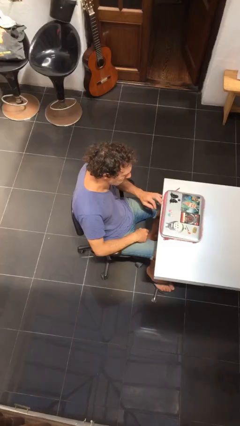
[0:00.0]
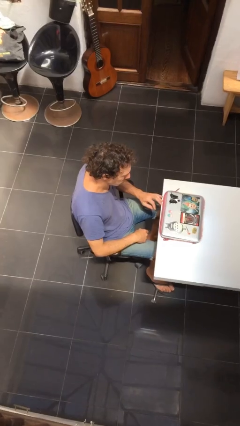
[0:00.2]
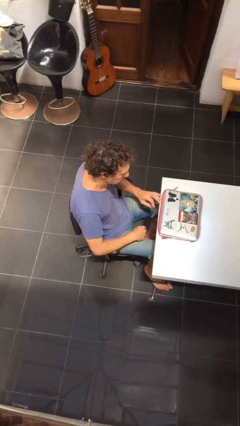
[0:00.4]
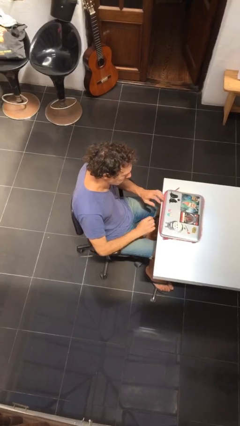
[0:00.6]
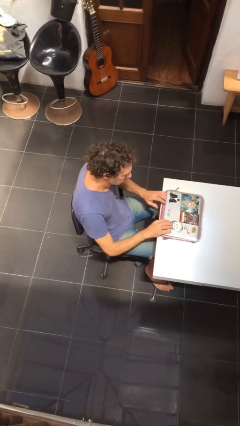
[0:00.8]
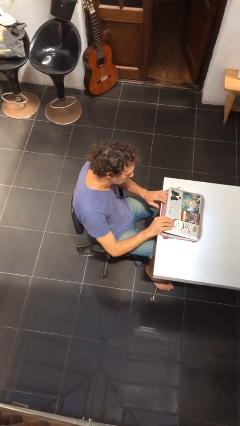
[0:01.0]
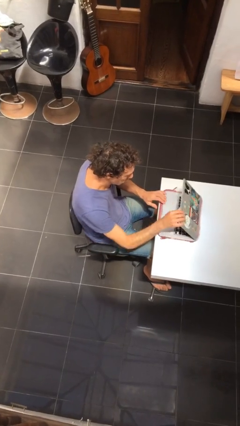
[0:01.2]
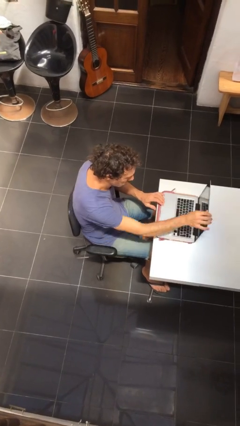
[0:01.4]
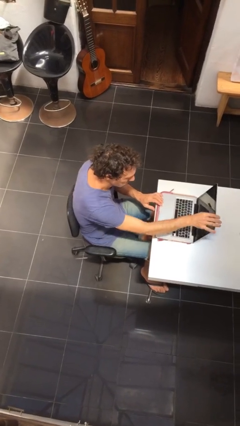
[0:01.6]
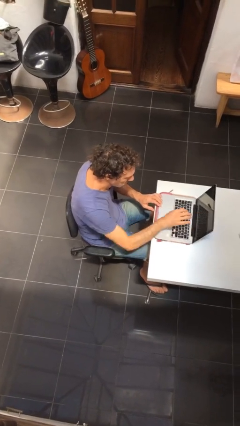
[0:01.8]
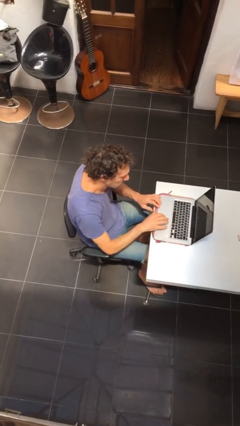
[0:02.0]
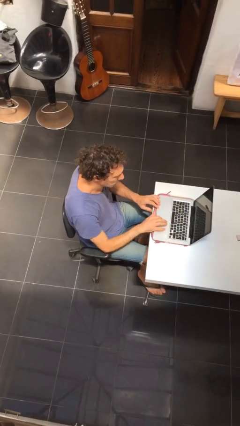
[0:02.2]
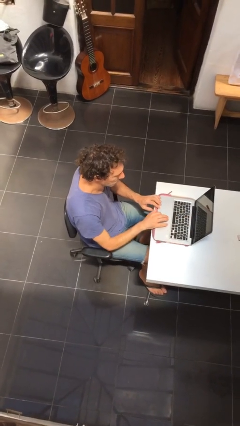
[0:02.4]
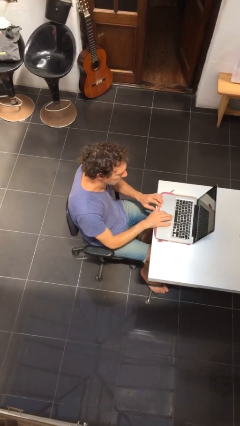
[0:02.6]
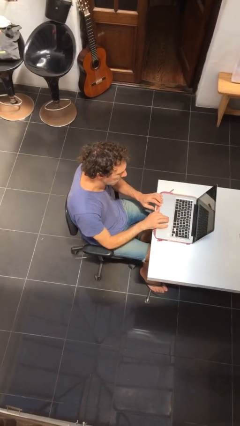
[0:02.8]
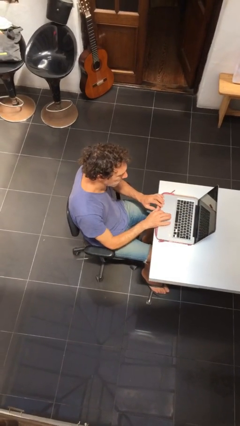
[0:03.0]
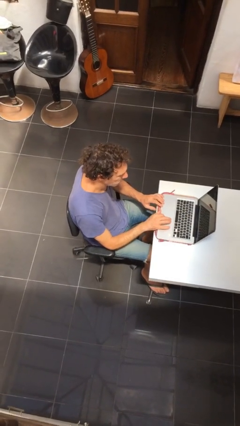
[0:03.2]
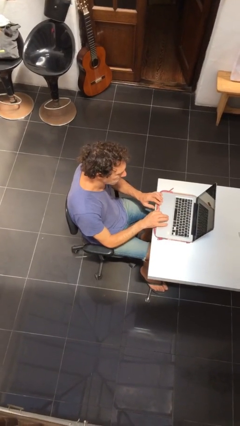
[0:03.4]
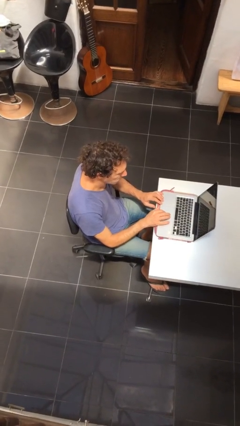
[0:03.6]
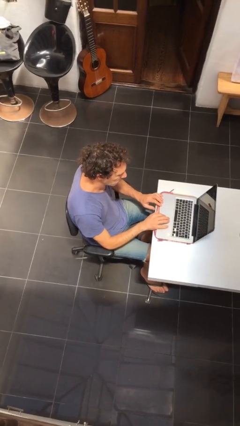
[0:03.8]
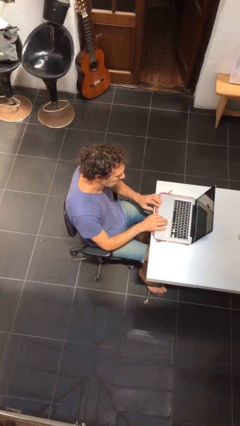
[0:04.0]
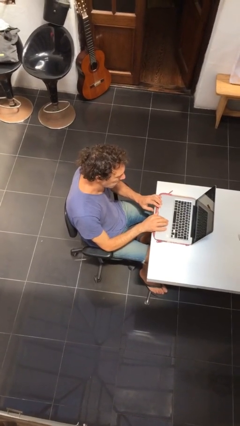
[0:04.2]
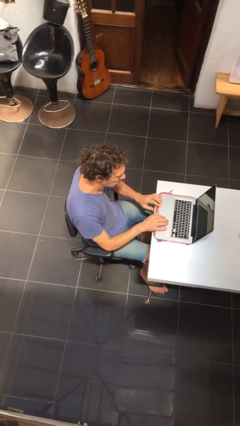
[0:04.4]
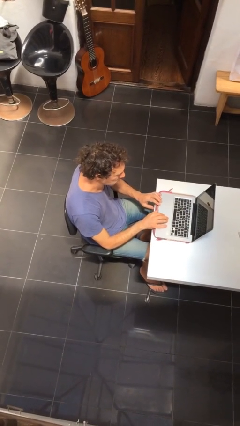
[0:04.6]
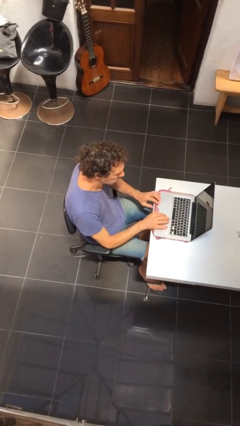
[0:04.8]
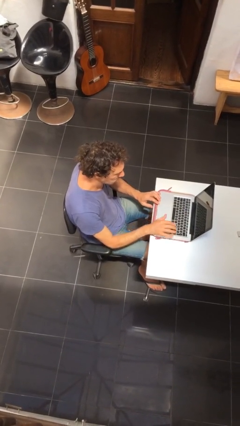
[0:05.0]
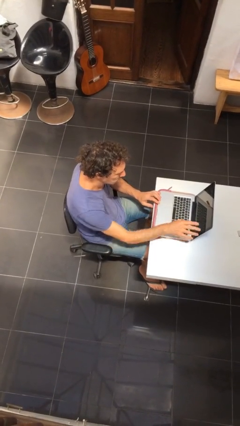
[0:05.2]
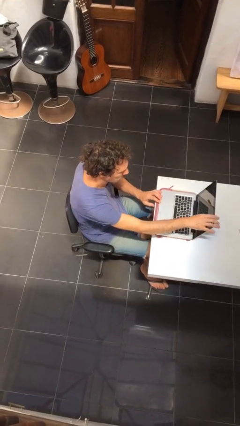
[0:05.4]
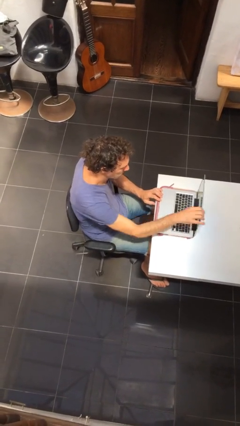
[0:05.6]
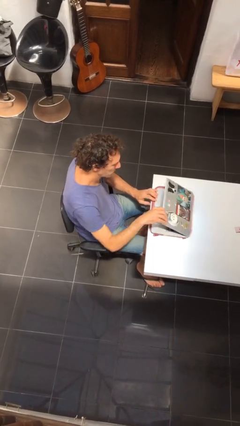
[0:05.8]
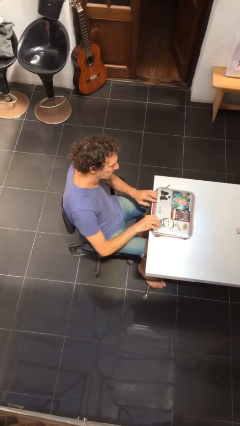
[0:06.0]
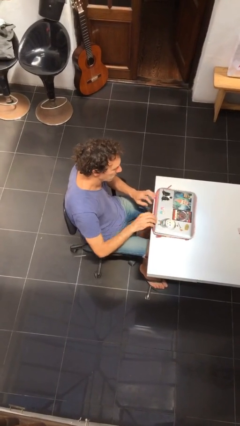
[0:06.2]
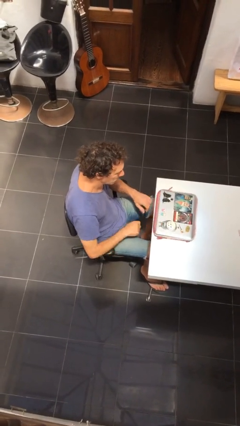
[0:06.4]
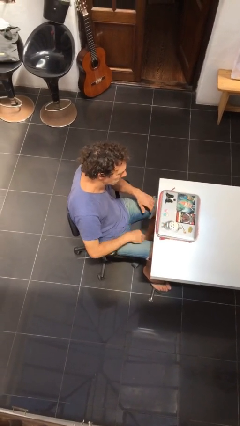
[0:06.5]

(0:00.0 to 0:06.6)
person interacts with laptop

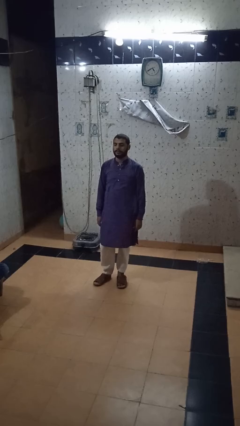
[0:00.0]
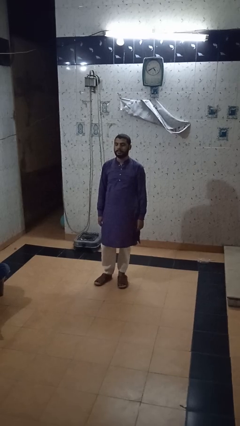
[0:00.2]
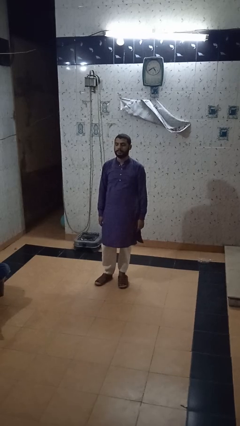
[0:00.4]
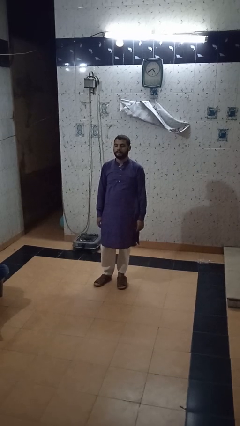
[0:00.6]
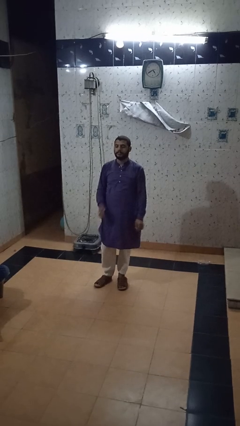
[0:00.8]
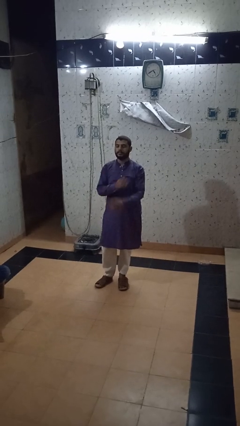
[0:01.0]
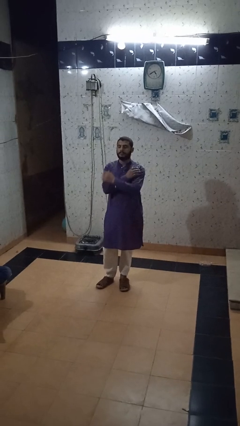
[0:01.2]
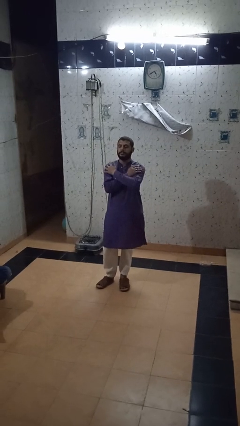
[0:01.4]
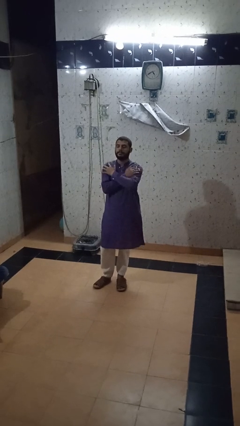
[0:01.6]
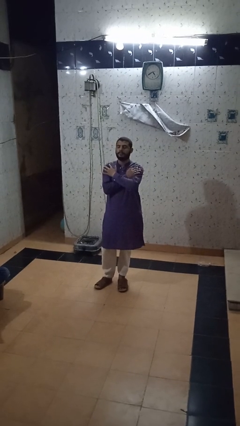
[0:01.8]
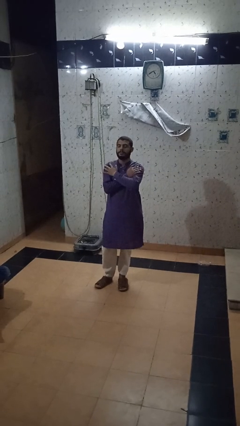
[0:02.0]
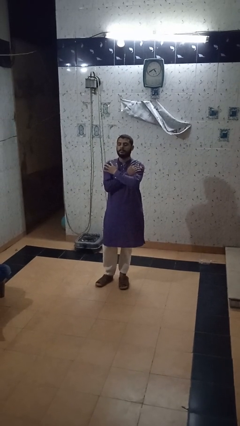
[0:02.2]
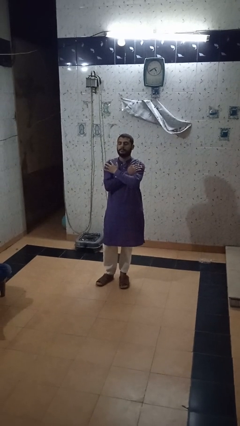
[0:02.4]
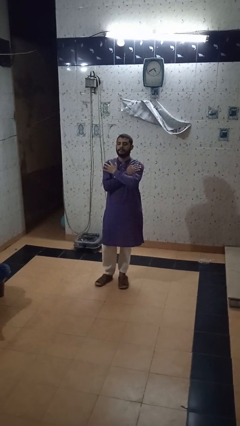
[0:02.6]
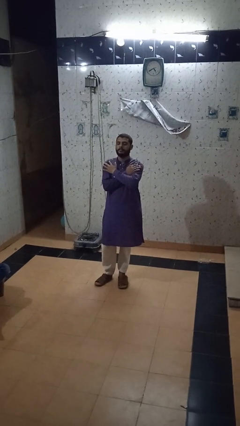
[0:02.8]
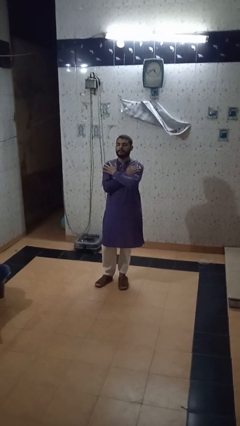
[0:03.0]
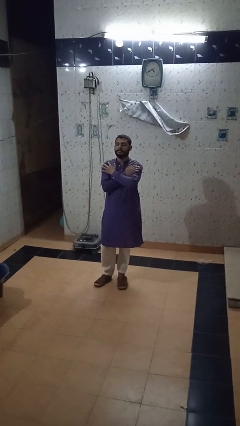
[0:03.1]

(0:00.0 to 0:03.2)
person crosses arms

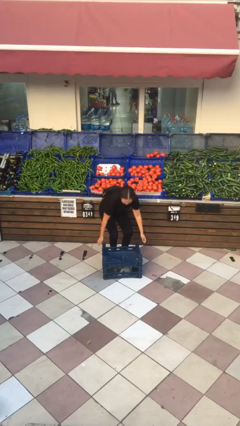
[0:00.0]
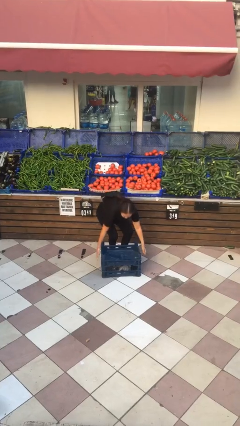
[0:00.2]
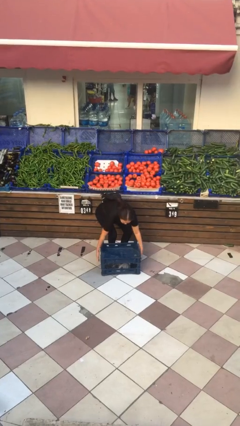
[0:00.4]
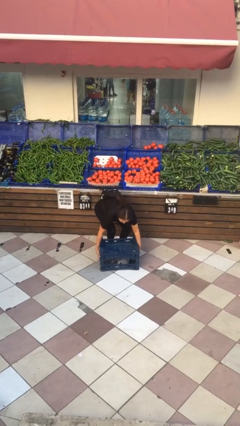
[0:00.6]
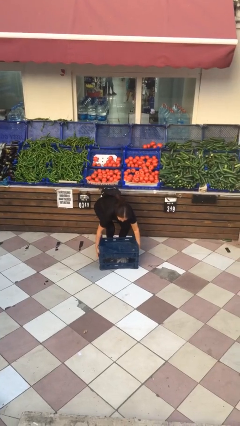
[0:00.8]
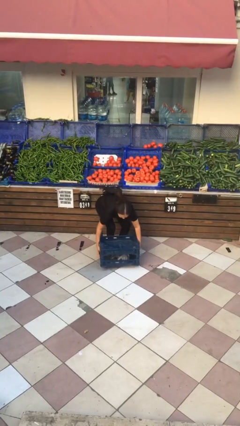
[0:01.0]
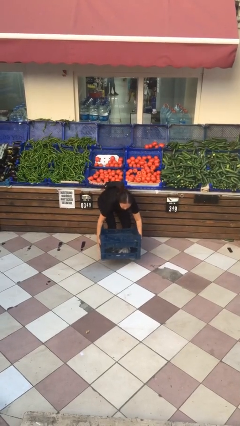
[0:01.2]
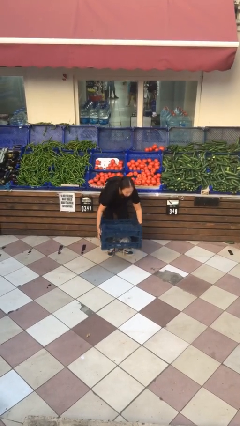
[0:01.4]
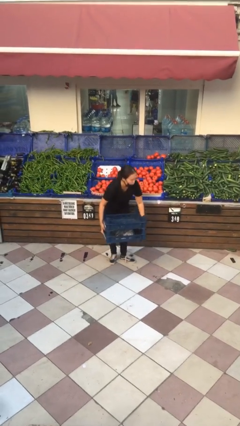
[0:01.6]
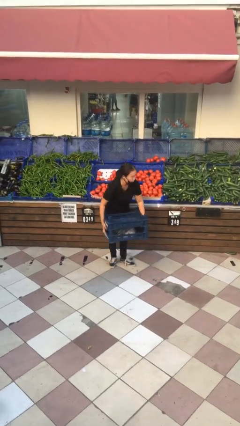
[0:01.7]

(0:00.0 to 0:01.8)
person picks up object from floor

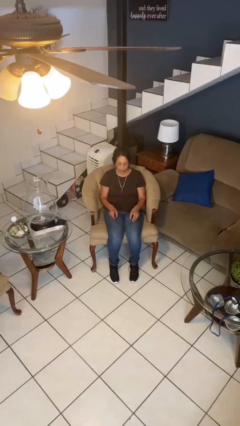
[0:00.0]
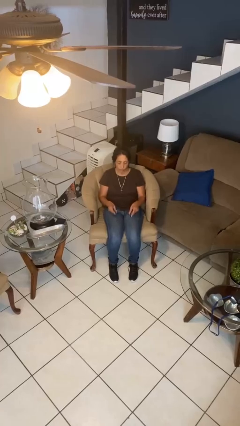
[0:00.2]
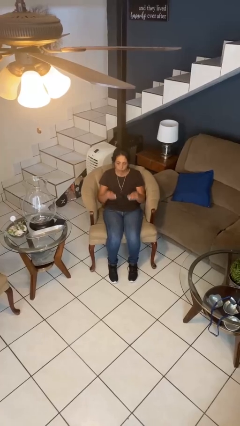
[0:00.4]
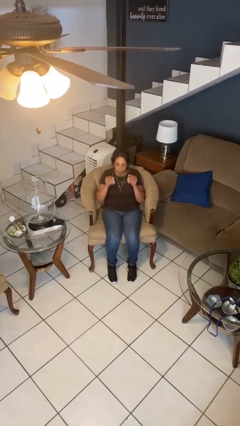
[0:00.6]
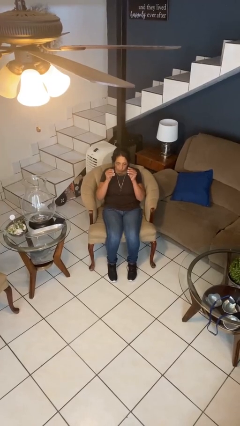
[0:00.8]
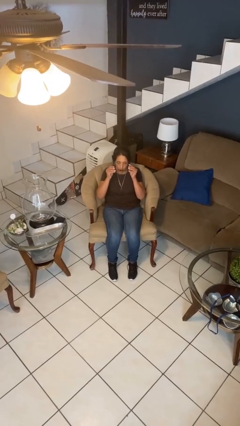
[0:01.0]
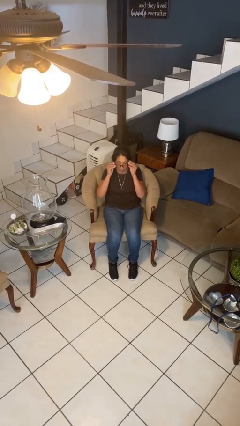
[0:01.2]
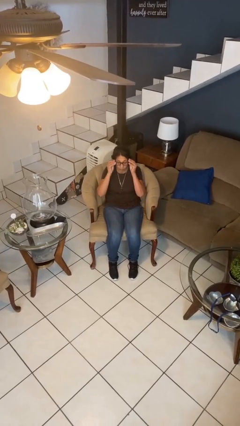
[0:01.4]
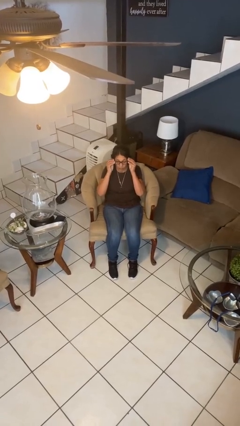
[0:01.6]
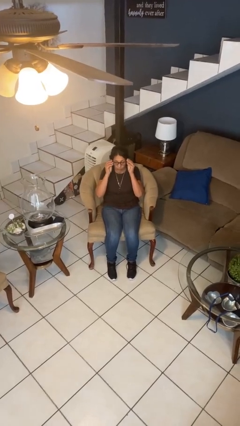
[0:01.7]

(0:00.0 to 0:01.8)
person puts on glasses

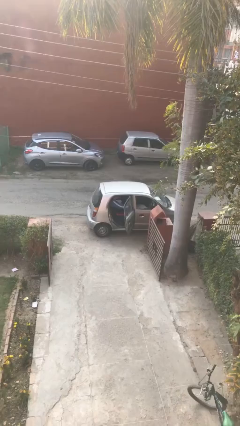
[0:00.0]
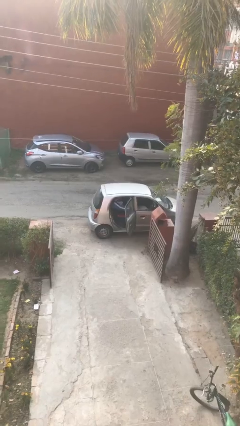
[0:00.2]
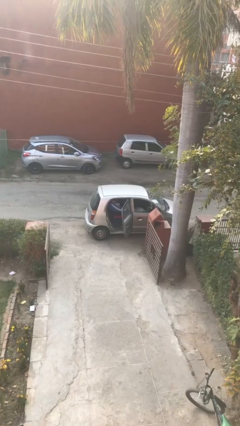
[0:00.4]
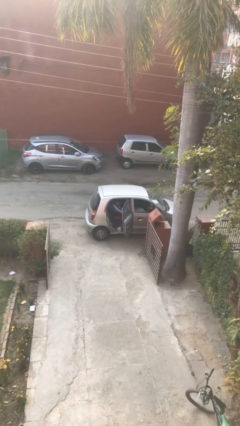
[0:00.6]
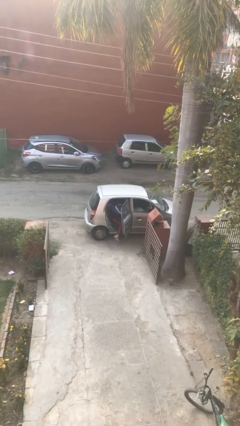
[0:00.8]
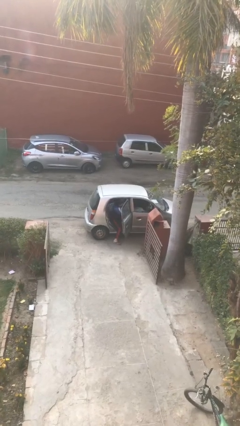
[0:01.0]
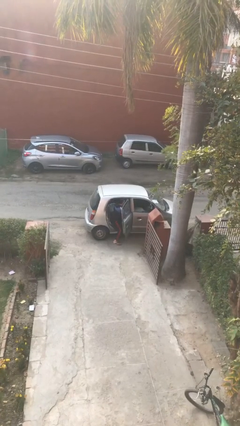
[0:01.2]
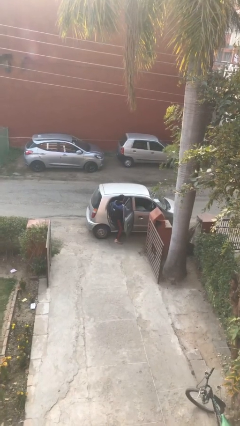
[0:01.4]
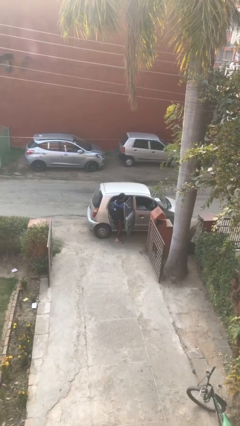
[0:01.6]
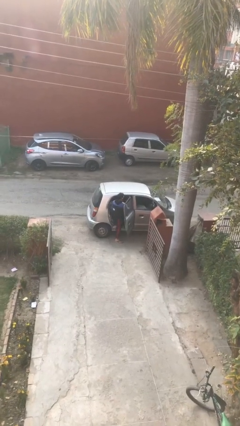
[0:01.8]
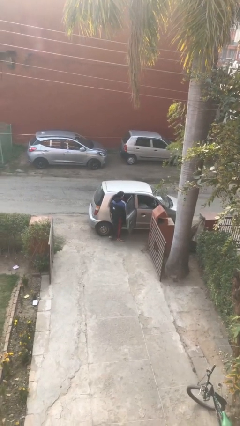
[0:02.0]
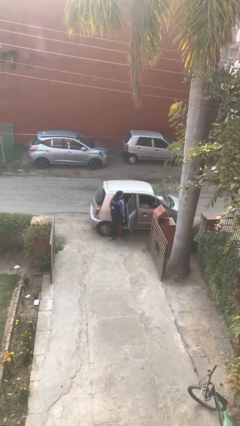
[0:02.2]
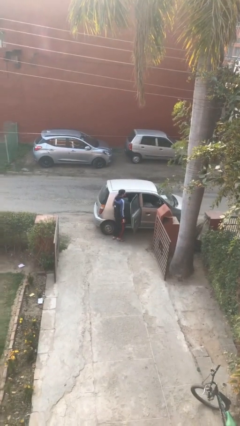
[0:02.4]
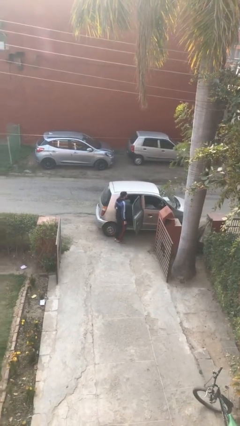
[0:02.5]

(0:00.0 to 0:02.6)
person exits car

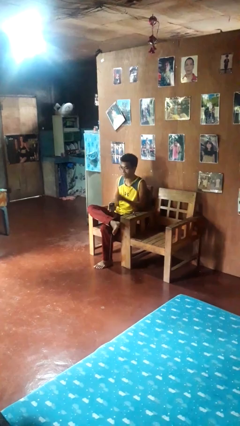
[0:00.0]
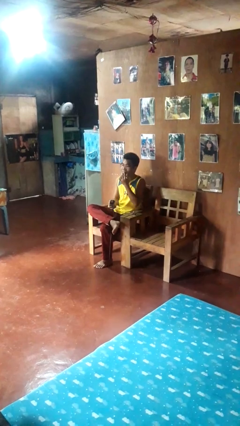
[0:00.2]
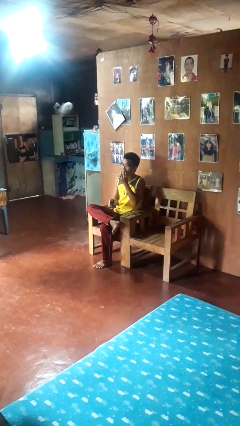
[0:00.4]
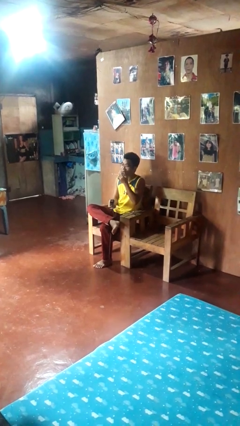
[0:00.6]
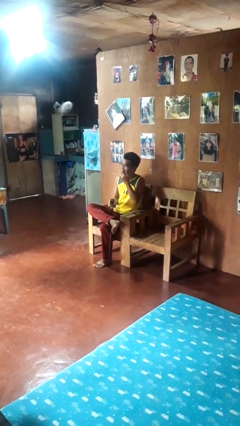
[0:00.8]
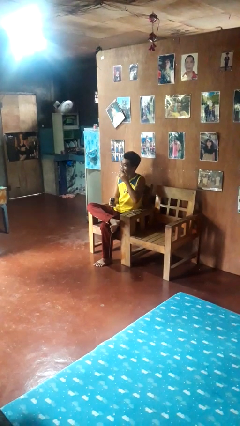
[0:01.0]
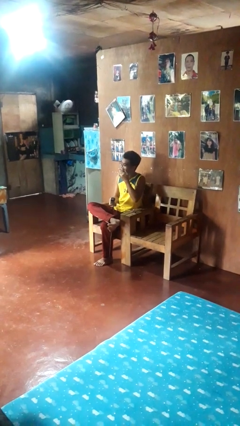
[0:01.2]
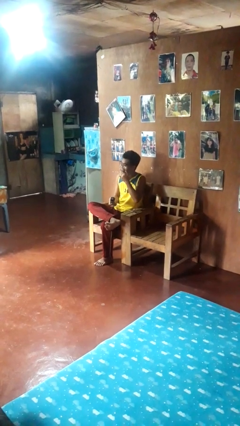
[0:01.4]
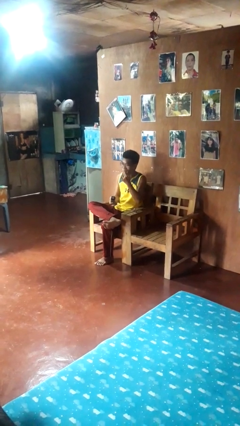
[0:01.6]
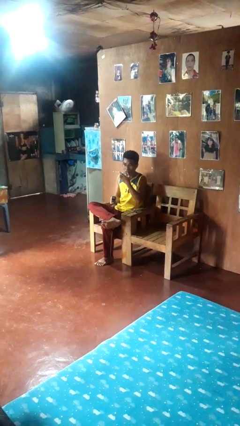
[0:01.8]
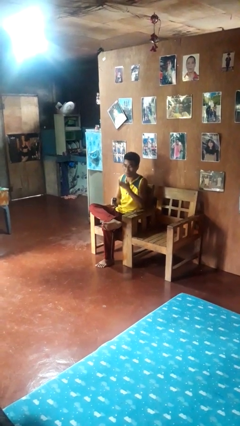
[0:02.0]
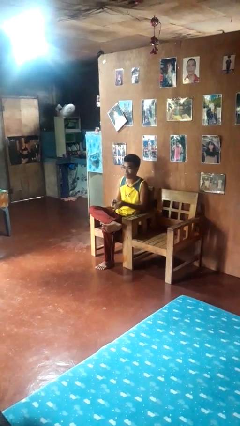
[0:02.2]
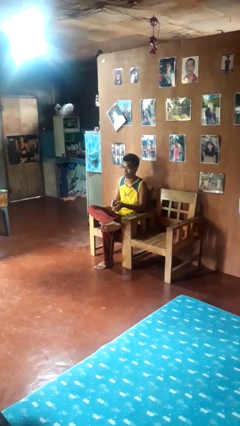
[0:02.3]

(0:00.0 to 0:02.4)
person licks fingers
